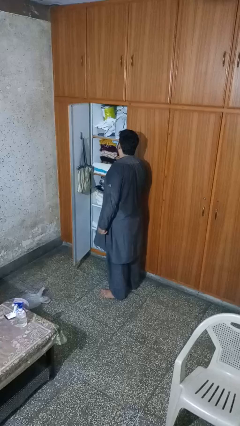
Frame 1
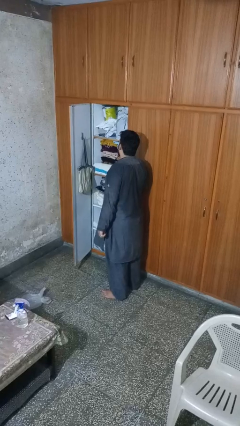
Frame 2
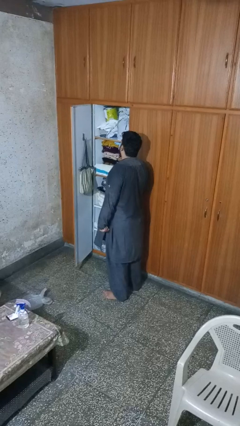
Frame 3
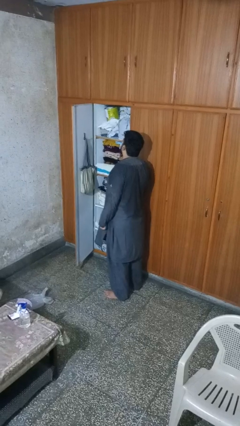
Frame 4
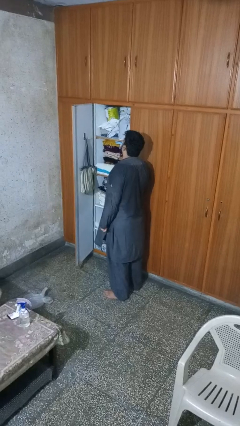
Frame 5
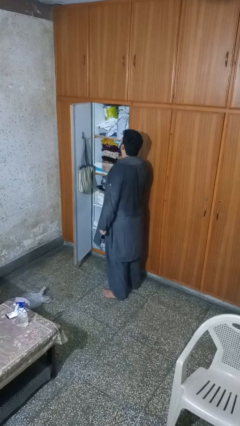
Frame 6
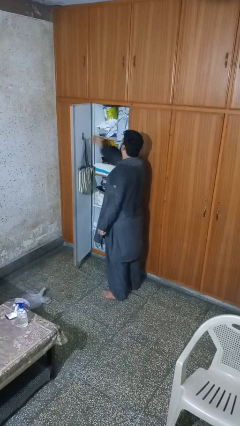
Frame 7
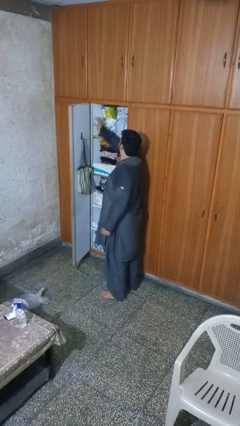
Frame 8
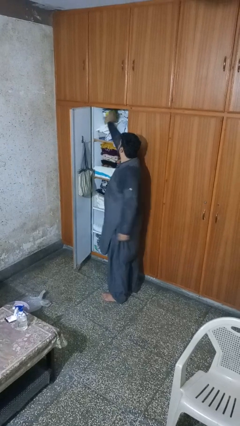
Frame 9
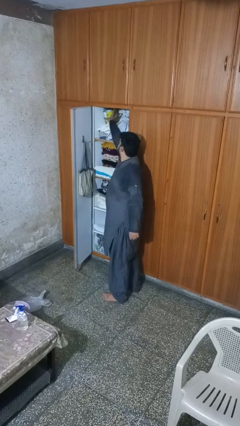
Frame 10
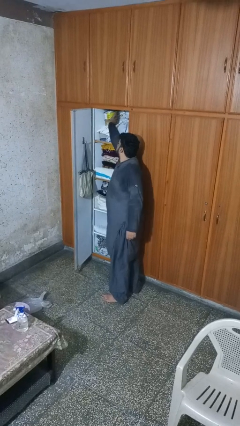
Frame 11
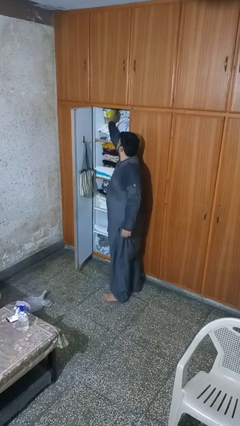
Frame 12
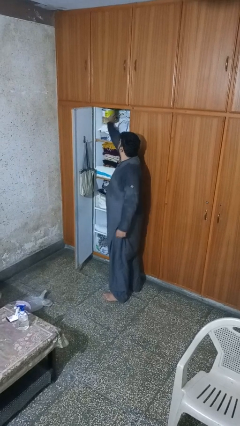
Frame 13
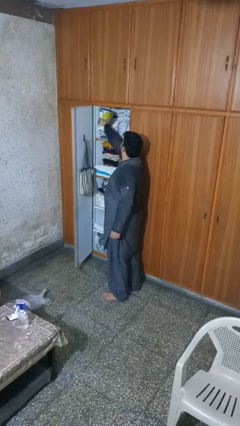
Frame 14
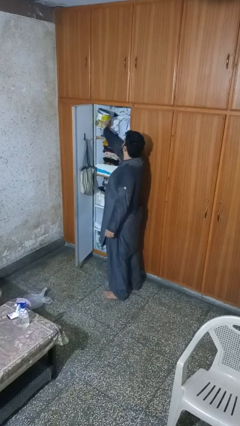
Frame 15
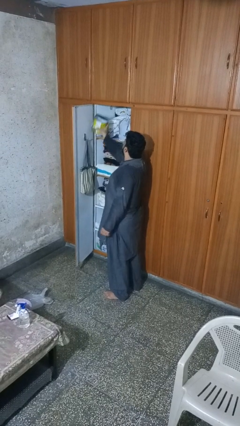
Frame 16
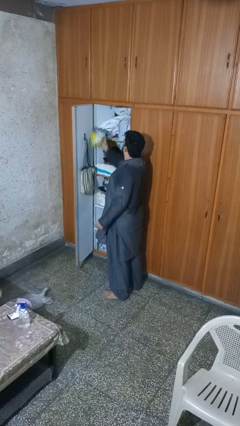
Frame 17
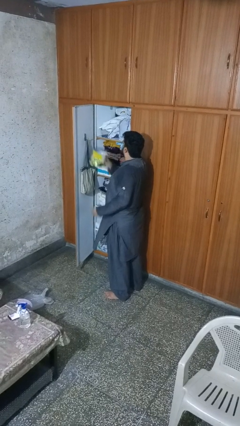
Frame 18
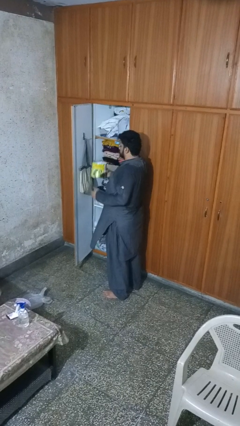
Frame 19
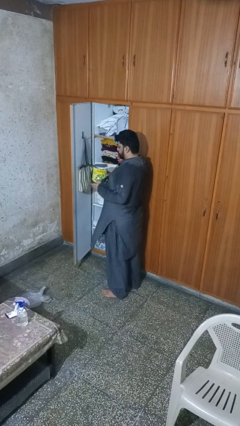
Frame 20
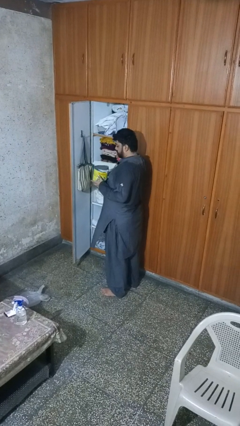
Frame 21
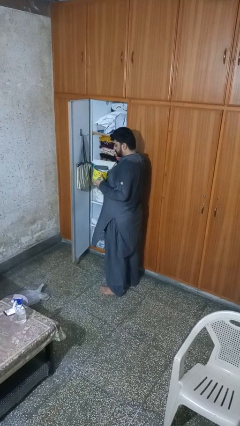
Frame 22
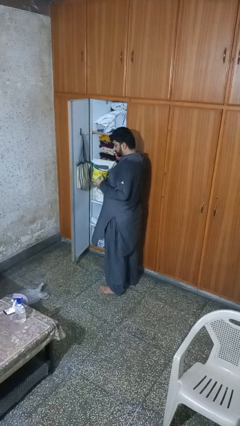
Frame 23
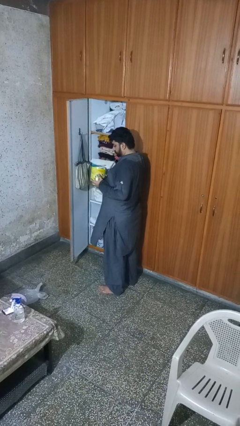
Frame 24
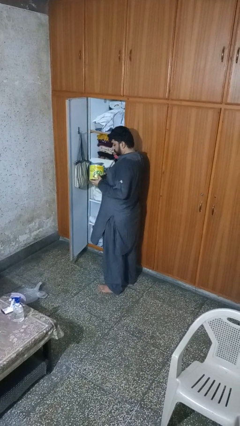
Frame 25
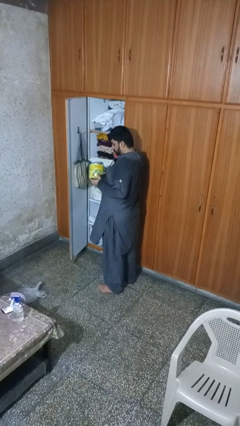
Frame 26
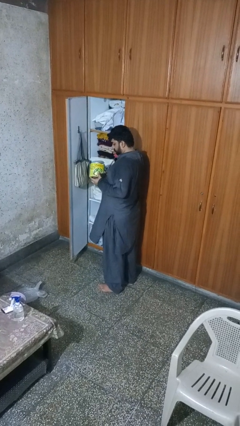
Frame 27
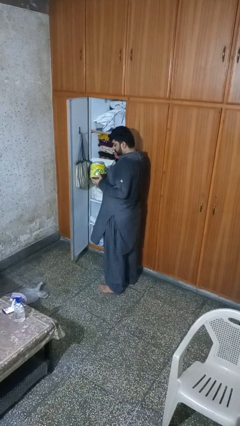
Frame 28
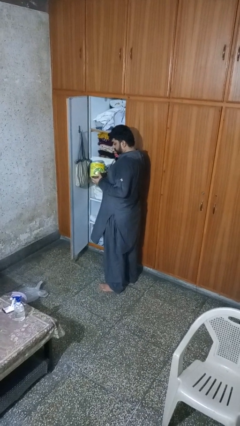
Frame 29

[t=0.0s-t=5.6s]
person picks up object from shelf

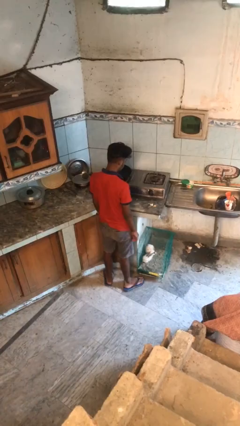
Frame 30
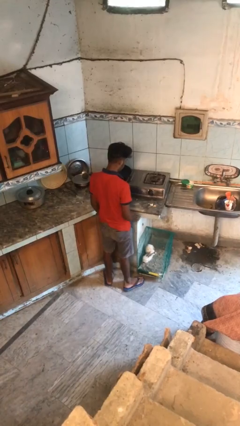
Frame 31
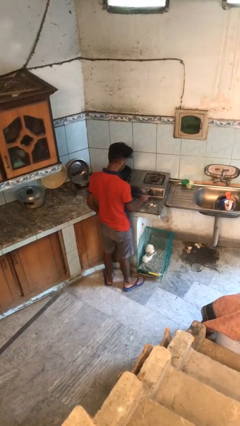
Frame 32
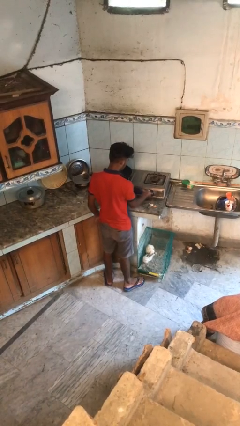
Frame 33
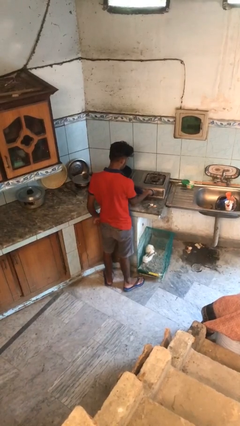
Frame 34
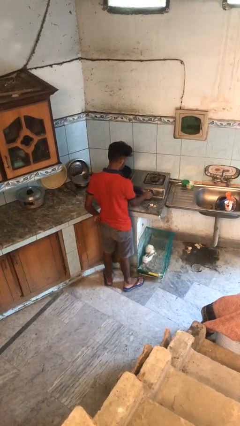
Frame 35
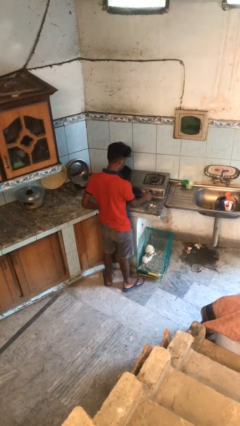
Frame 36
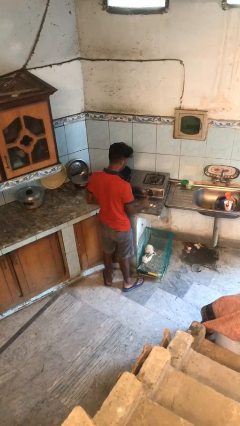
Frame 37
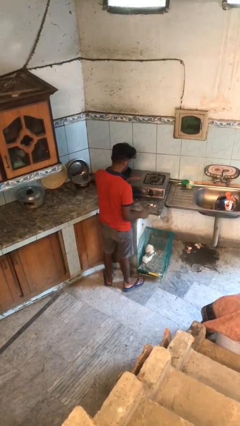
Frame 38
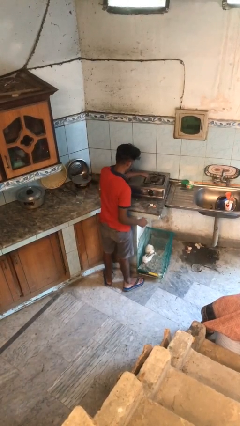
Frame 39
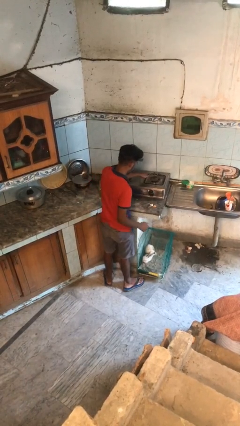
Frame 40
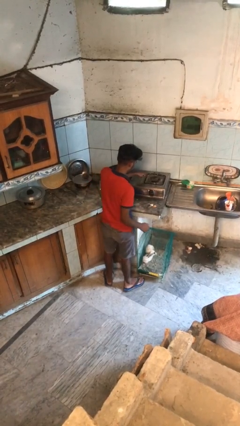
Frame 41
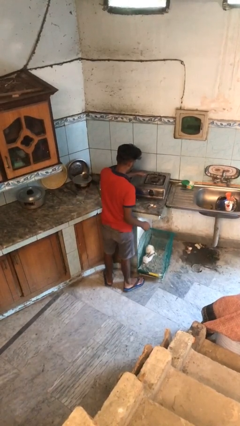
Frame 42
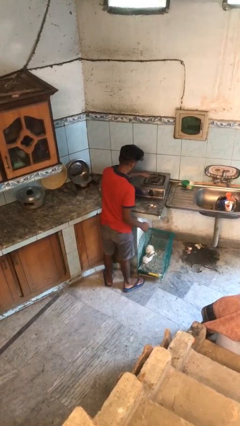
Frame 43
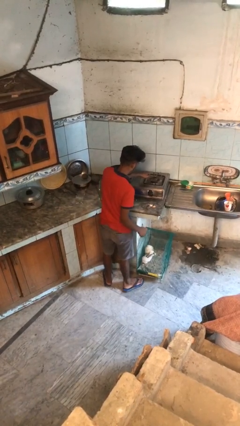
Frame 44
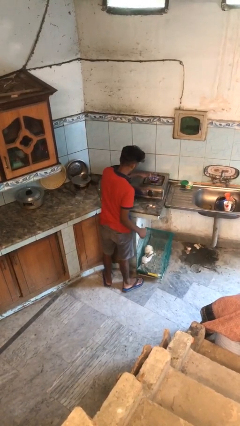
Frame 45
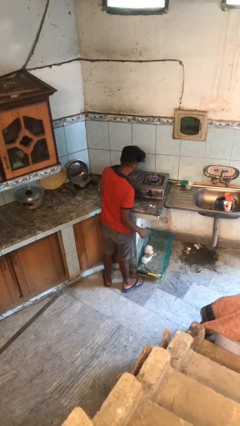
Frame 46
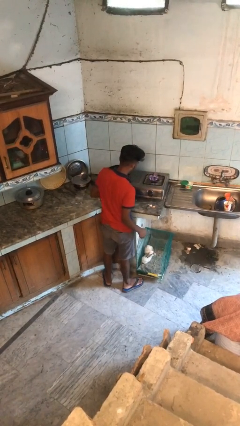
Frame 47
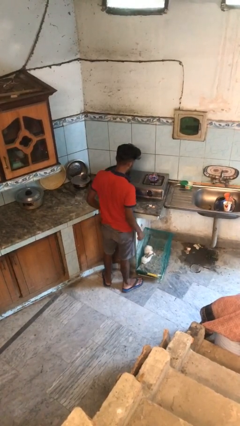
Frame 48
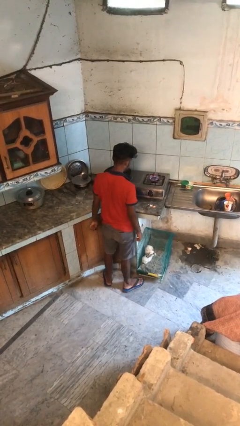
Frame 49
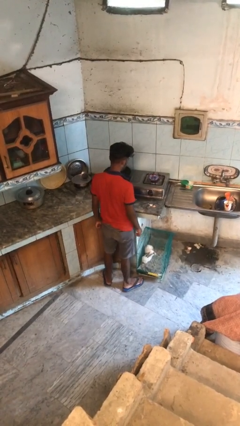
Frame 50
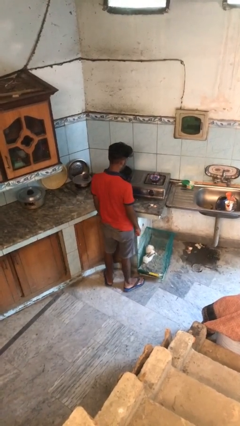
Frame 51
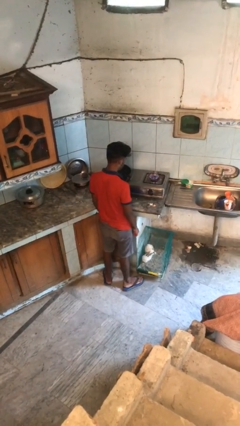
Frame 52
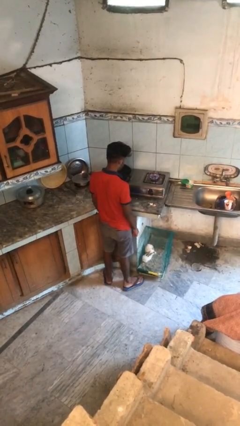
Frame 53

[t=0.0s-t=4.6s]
person turns on stovetop

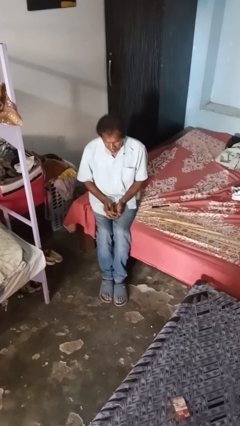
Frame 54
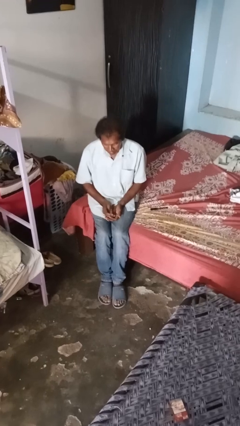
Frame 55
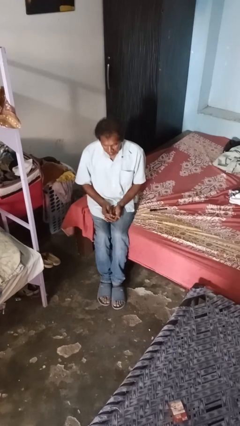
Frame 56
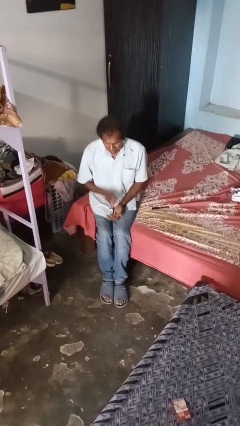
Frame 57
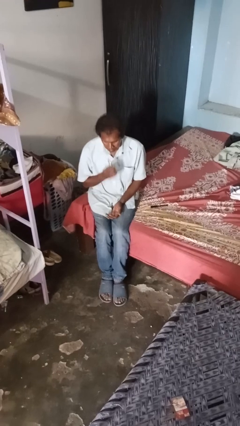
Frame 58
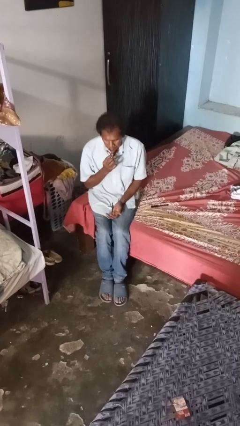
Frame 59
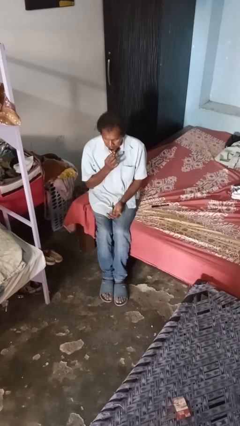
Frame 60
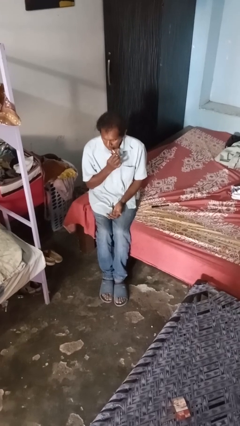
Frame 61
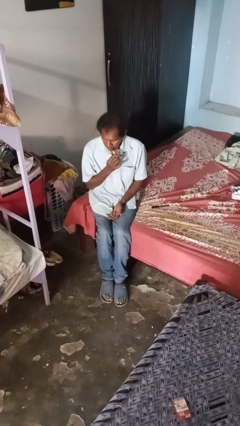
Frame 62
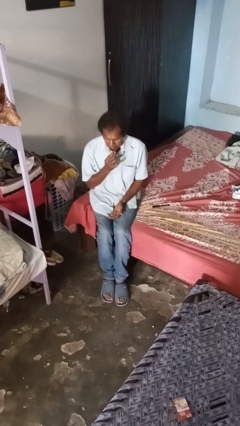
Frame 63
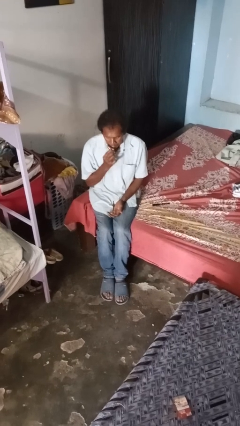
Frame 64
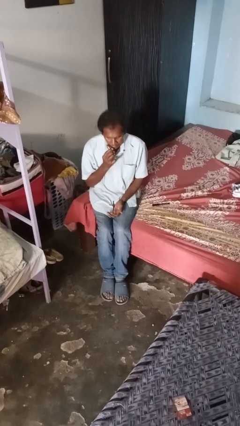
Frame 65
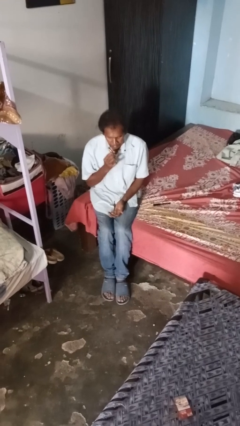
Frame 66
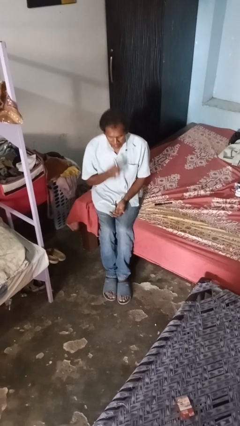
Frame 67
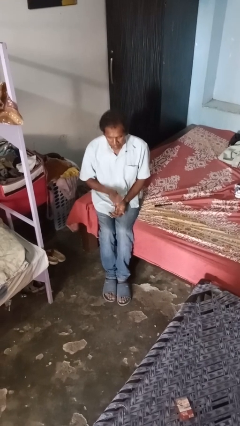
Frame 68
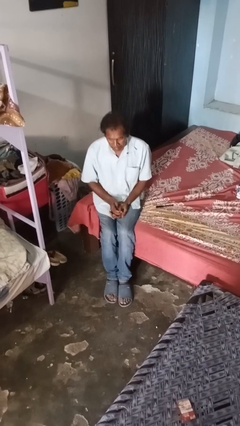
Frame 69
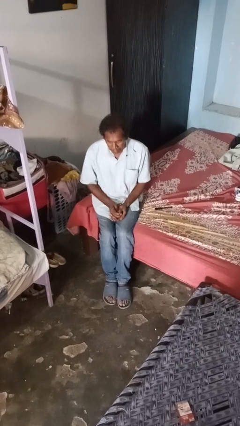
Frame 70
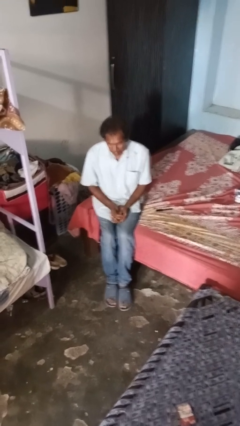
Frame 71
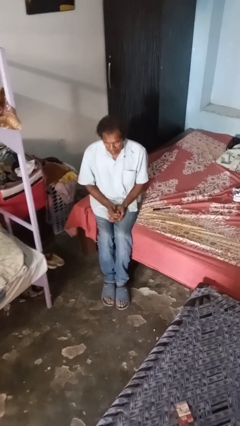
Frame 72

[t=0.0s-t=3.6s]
person applies lip makeup

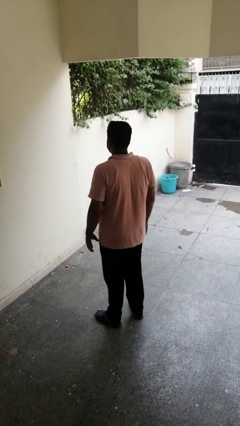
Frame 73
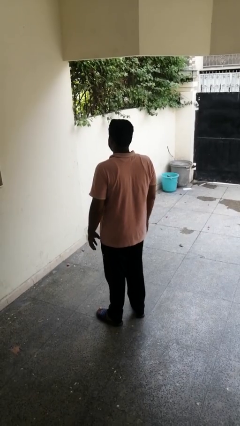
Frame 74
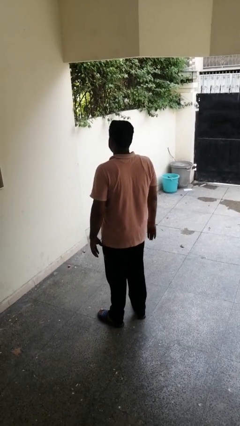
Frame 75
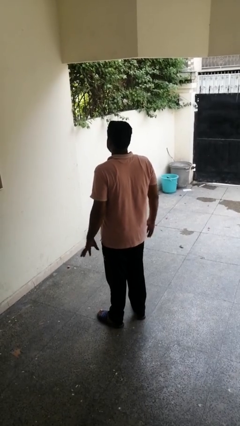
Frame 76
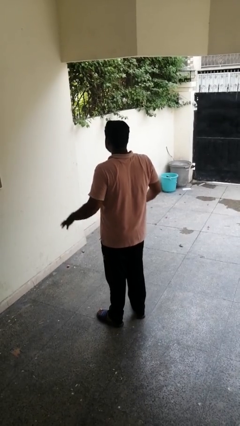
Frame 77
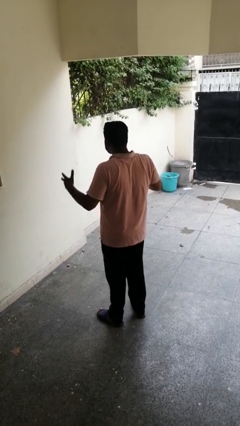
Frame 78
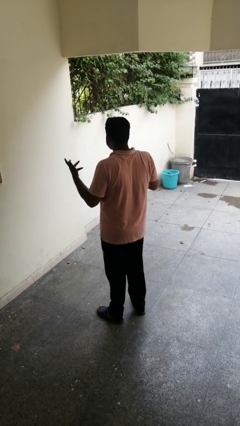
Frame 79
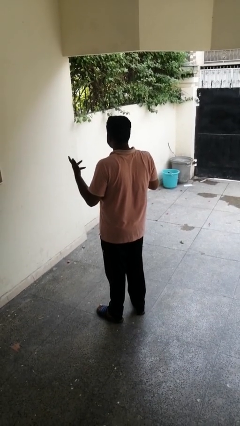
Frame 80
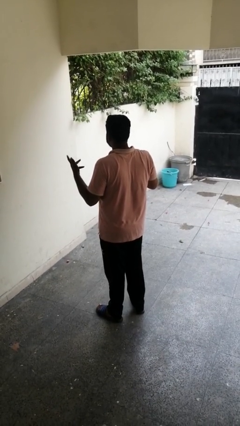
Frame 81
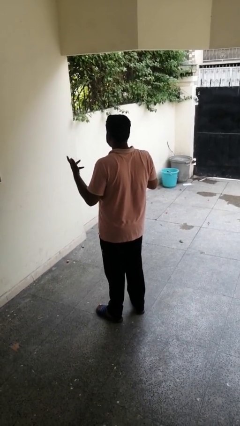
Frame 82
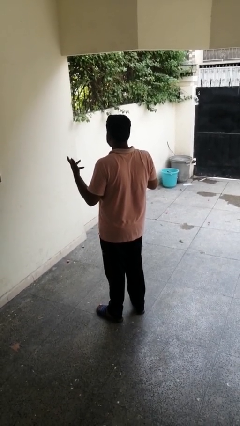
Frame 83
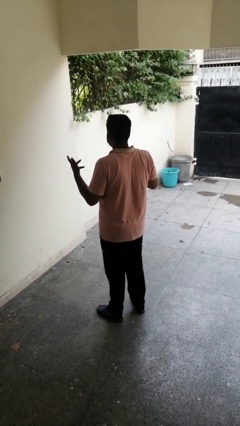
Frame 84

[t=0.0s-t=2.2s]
person shrugs

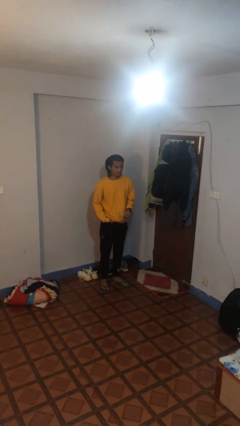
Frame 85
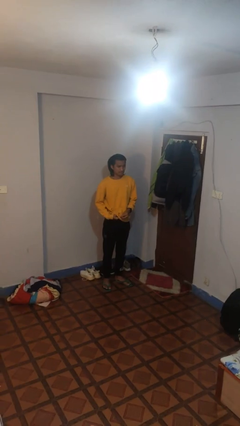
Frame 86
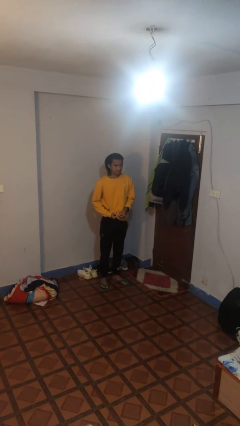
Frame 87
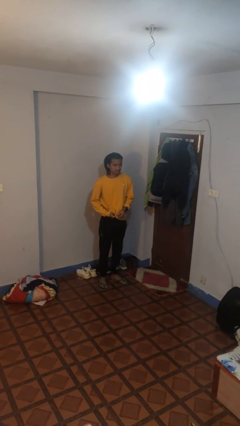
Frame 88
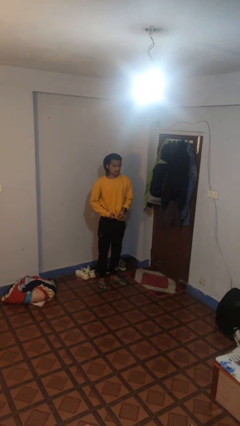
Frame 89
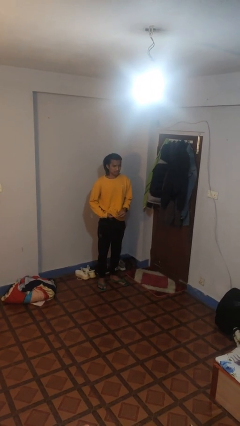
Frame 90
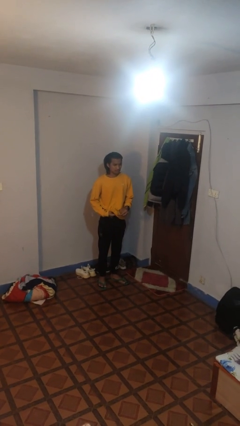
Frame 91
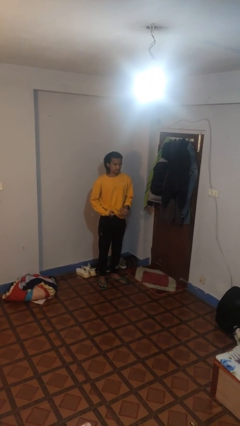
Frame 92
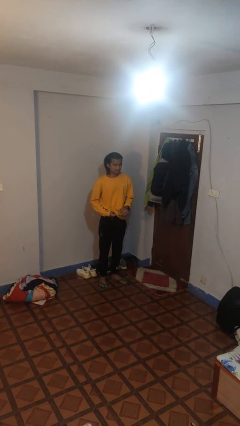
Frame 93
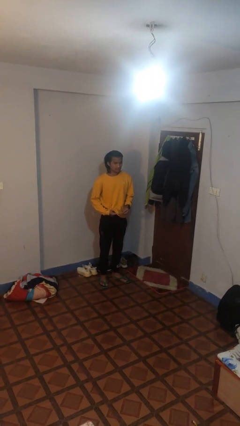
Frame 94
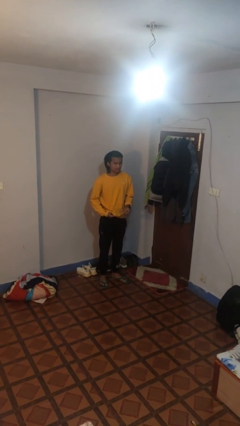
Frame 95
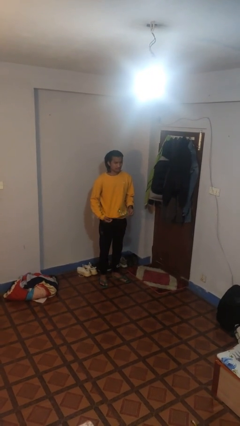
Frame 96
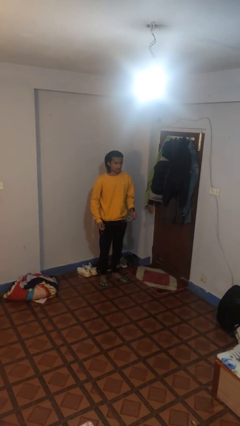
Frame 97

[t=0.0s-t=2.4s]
person cleans eyeglasses
